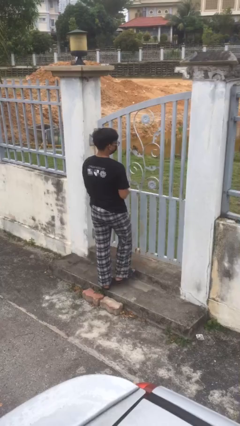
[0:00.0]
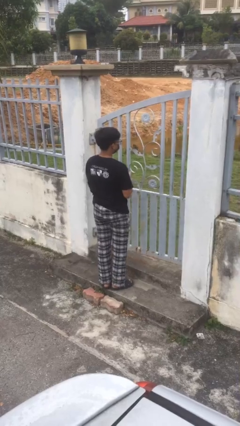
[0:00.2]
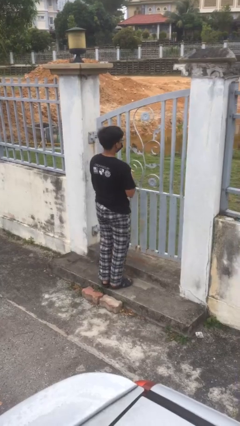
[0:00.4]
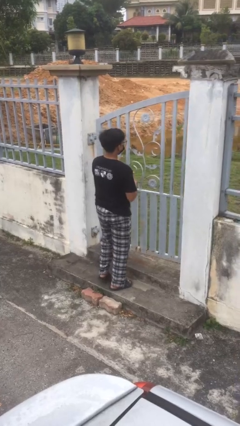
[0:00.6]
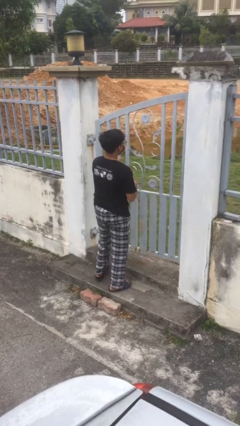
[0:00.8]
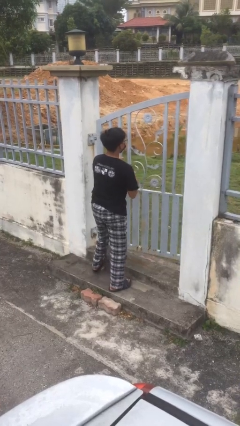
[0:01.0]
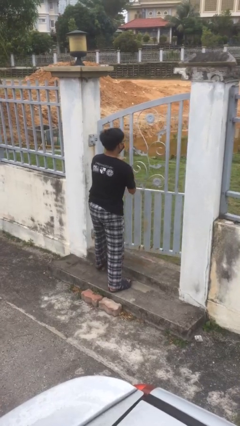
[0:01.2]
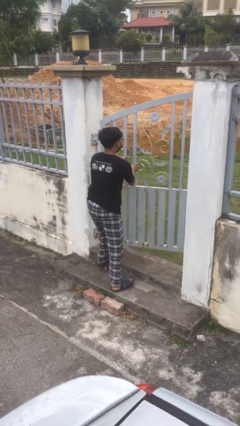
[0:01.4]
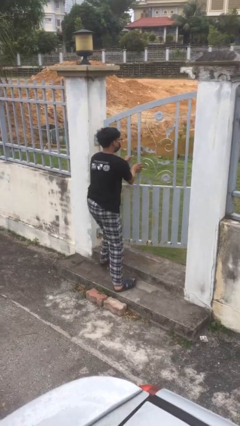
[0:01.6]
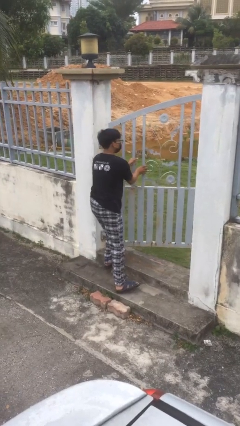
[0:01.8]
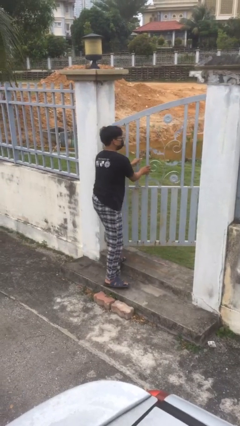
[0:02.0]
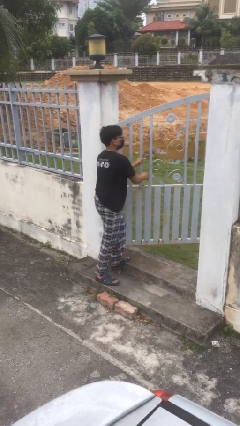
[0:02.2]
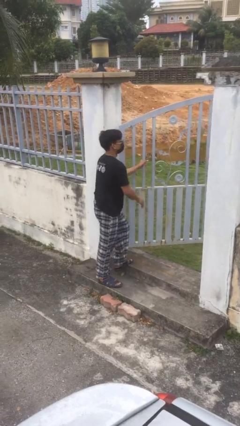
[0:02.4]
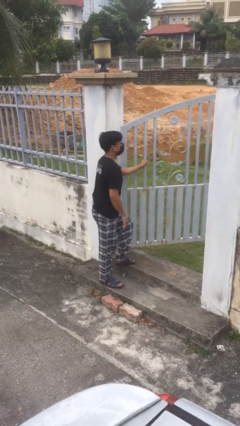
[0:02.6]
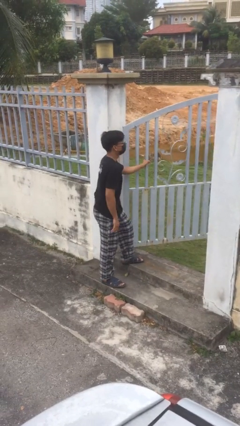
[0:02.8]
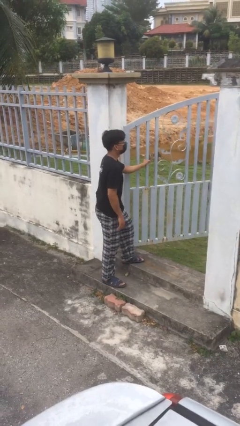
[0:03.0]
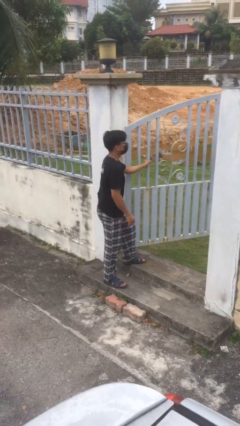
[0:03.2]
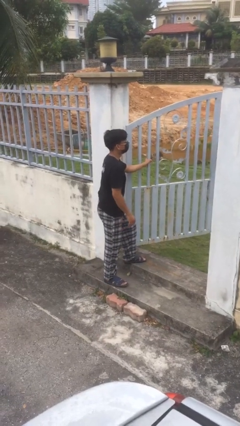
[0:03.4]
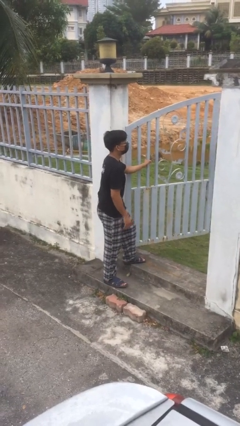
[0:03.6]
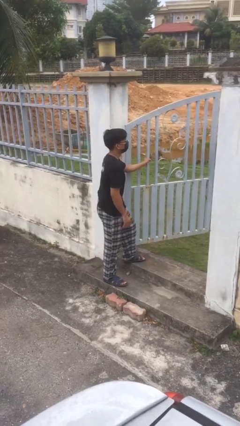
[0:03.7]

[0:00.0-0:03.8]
person opens facility door

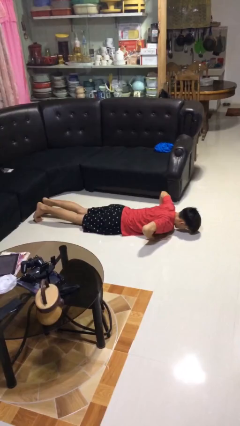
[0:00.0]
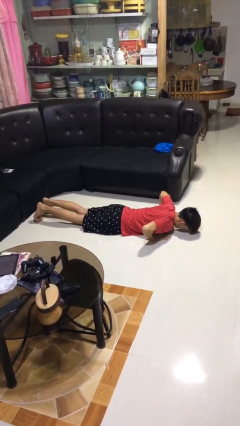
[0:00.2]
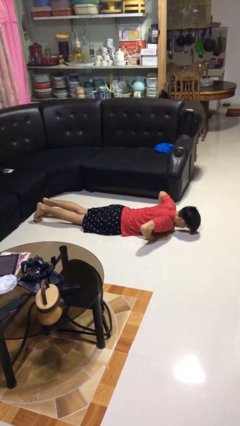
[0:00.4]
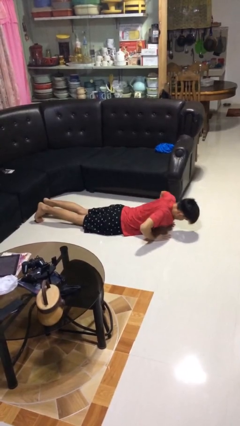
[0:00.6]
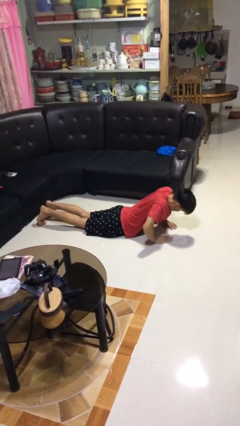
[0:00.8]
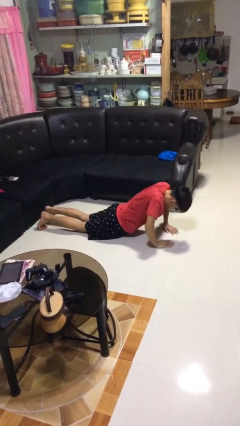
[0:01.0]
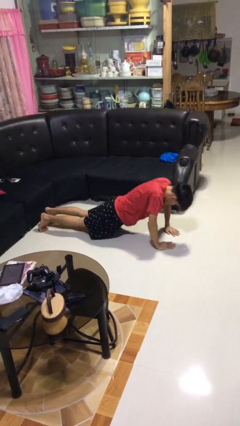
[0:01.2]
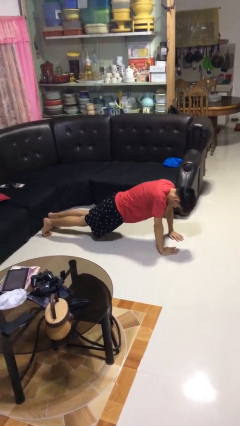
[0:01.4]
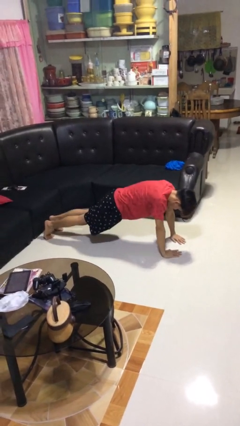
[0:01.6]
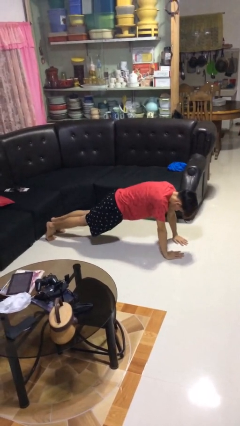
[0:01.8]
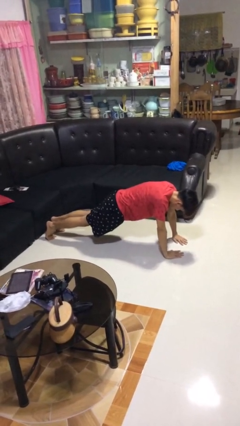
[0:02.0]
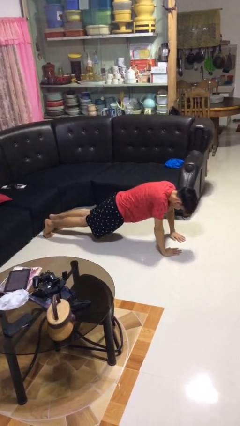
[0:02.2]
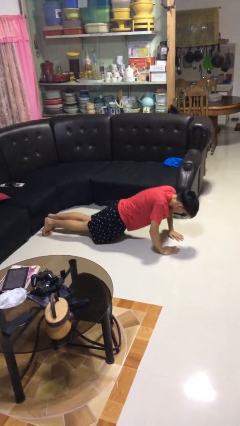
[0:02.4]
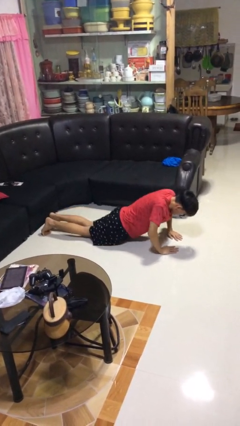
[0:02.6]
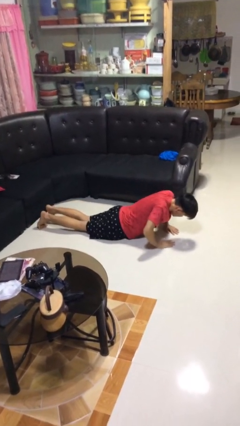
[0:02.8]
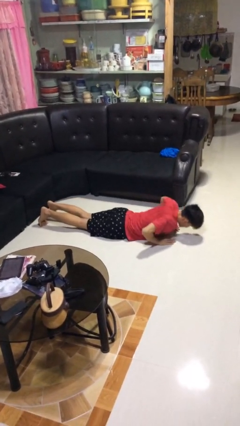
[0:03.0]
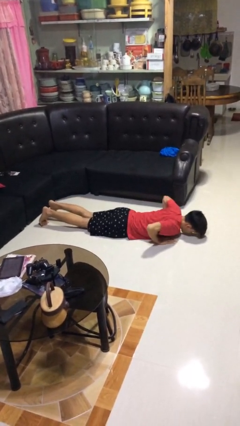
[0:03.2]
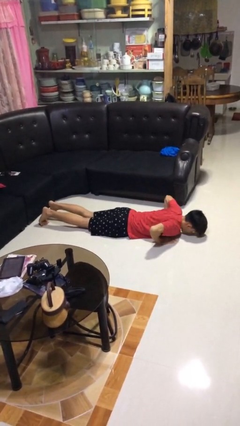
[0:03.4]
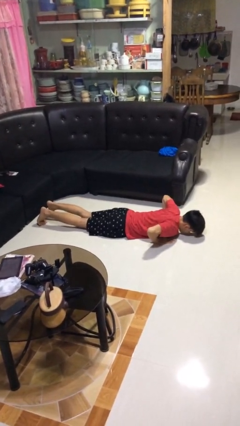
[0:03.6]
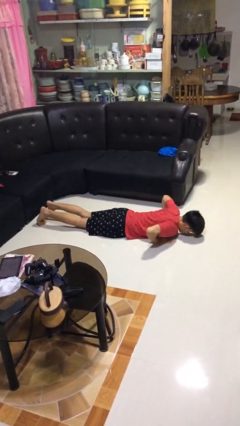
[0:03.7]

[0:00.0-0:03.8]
person exercises with pushup

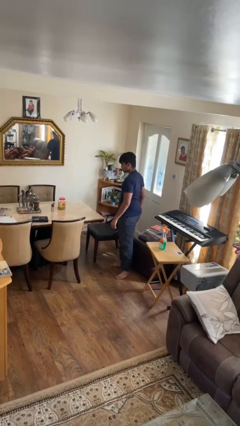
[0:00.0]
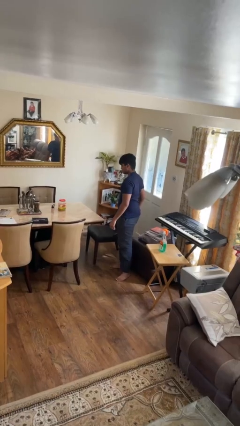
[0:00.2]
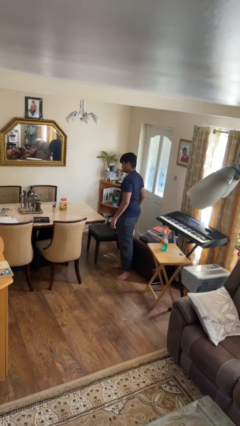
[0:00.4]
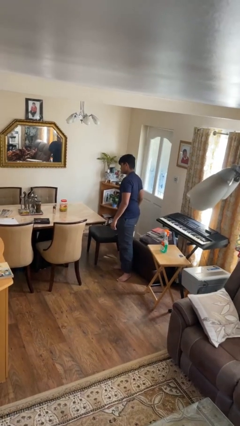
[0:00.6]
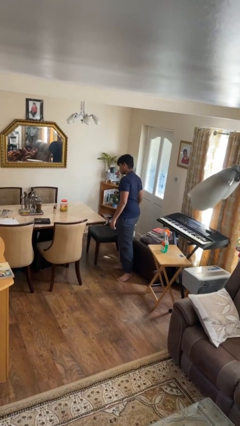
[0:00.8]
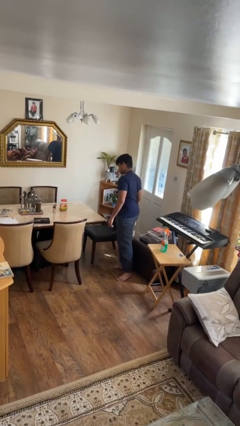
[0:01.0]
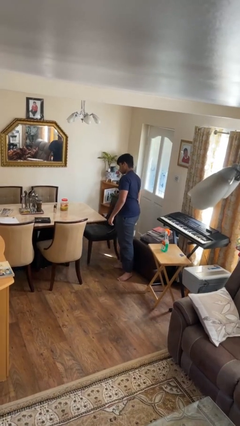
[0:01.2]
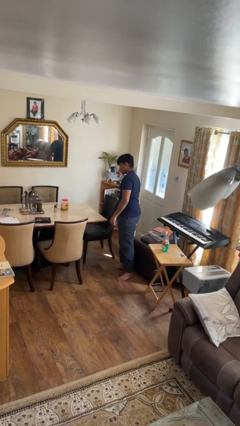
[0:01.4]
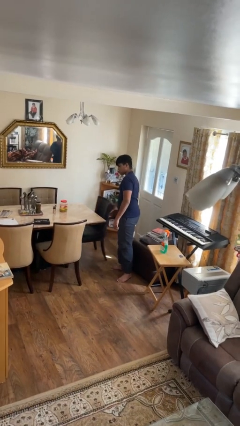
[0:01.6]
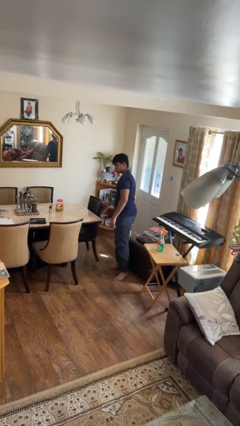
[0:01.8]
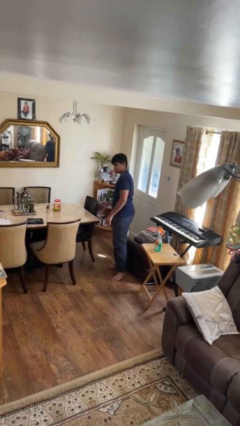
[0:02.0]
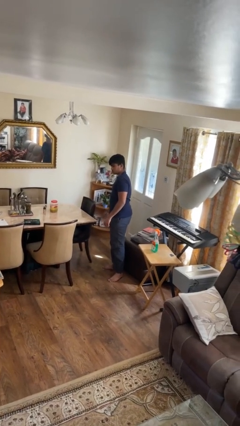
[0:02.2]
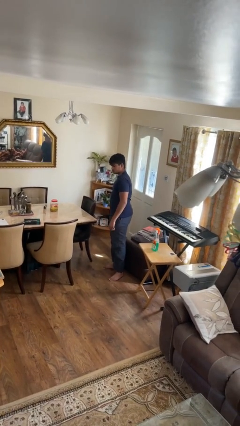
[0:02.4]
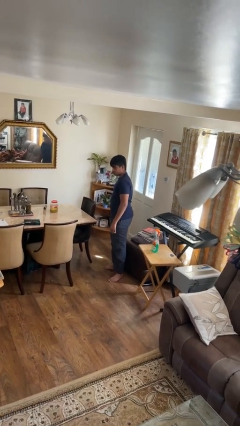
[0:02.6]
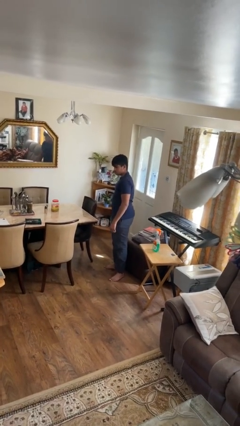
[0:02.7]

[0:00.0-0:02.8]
person pushes in chair

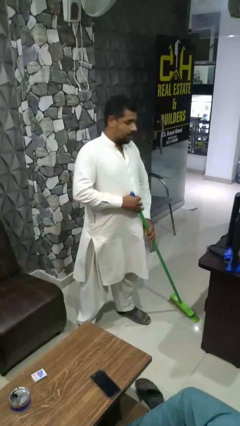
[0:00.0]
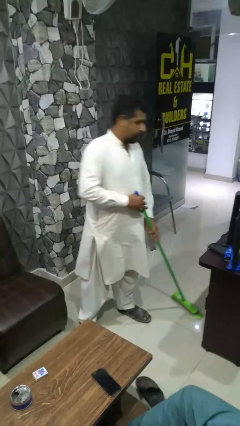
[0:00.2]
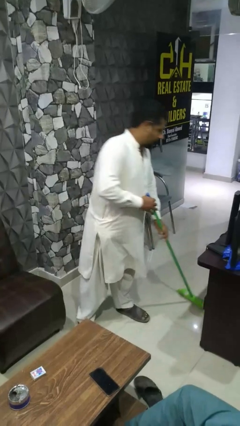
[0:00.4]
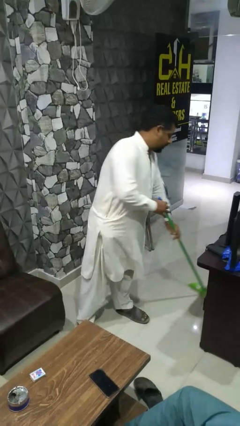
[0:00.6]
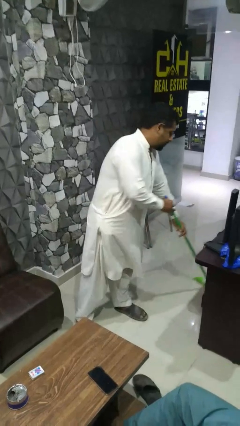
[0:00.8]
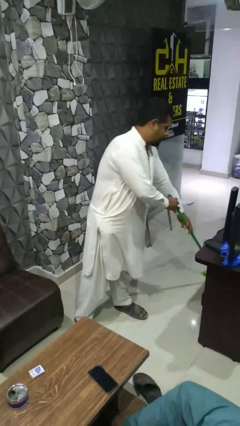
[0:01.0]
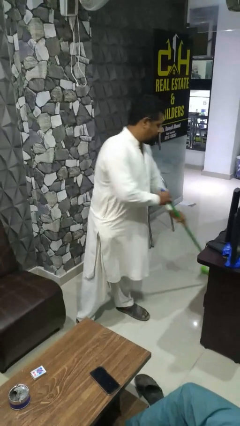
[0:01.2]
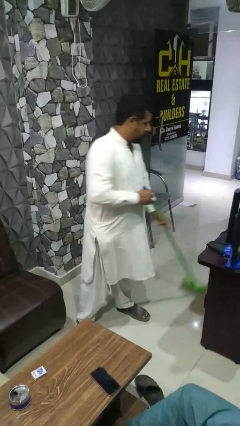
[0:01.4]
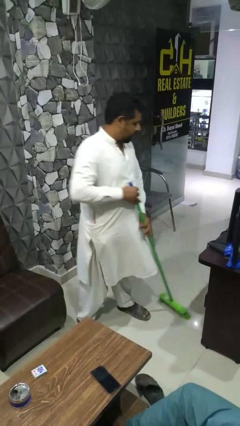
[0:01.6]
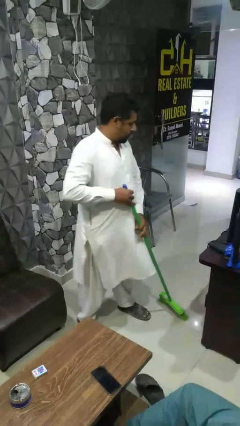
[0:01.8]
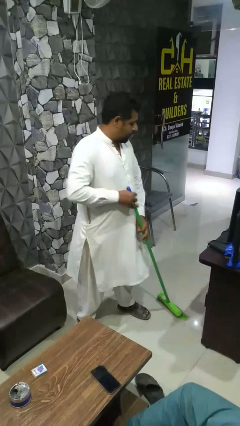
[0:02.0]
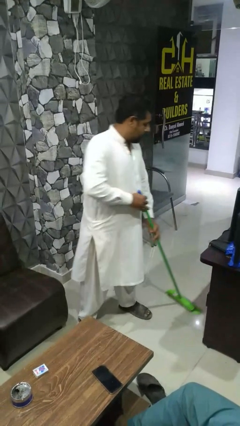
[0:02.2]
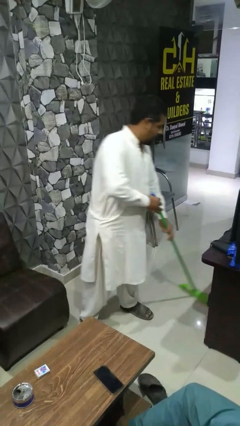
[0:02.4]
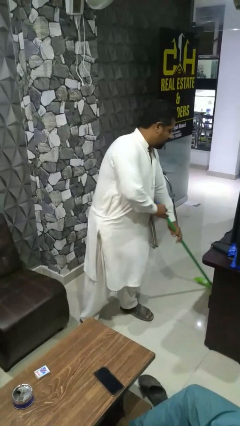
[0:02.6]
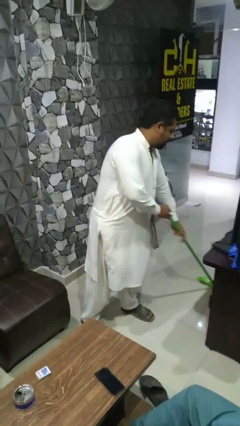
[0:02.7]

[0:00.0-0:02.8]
person mops

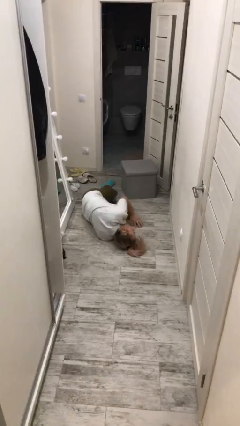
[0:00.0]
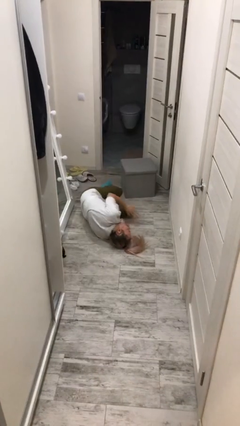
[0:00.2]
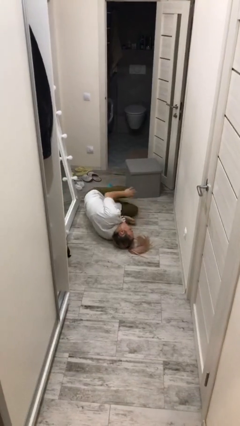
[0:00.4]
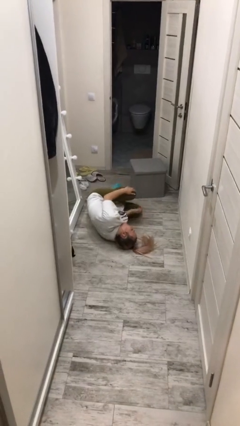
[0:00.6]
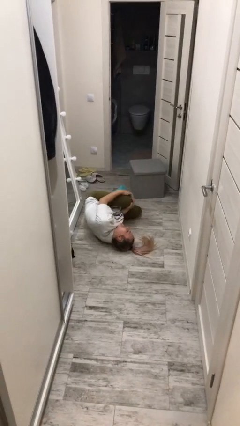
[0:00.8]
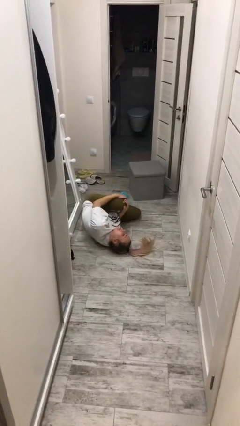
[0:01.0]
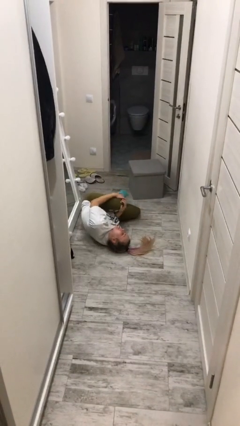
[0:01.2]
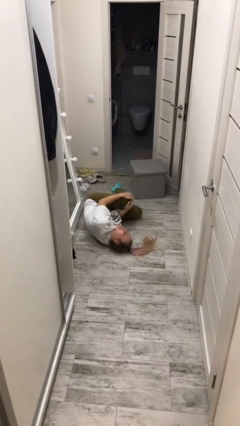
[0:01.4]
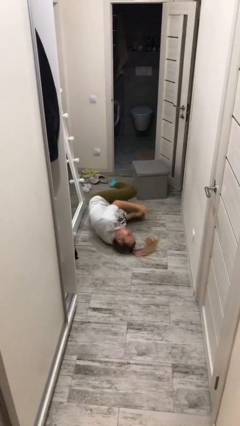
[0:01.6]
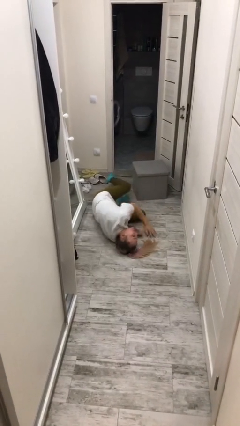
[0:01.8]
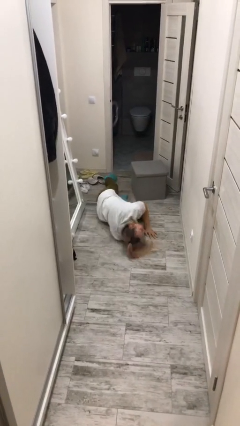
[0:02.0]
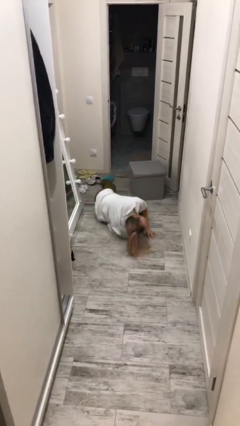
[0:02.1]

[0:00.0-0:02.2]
person lies down on floor

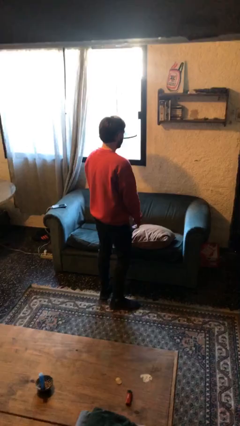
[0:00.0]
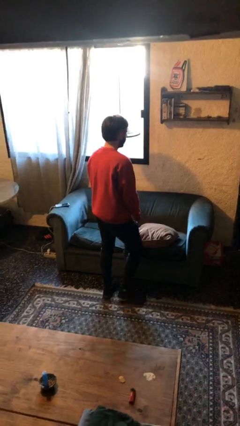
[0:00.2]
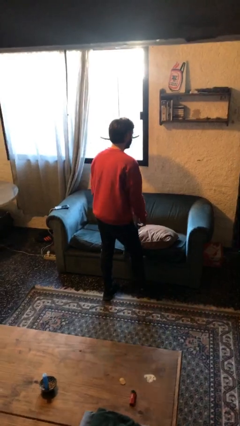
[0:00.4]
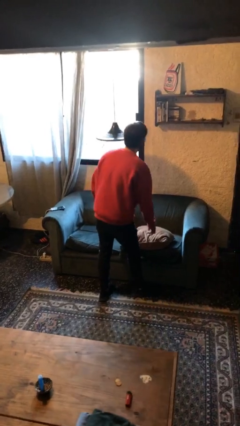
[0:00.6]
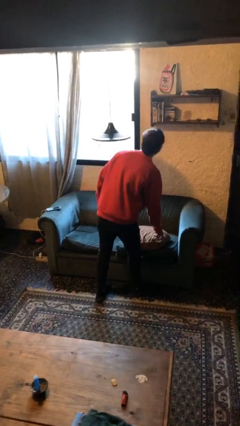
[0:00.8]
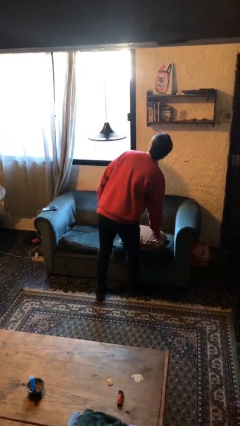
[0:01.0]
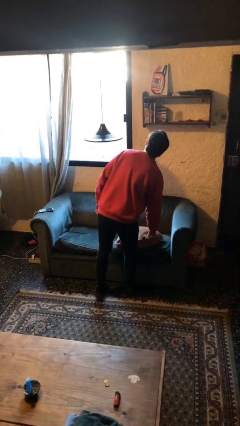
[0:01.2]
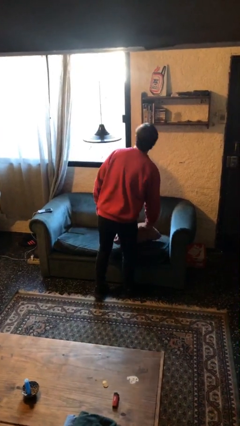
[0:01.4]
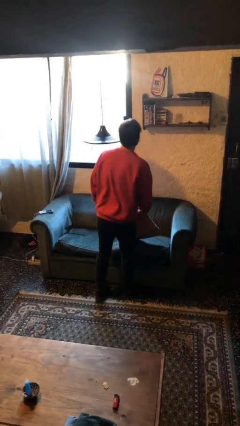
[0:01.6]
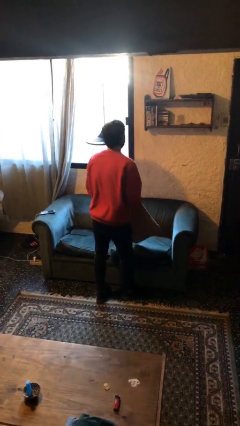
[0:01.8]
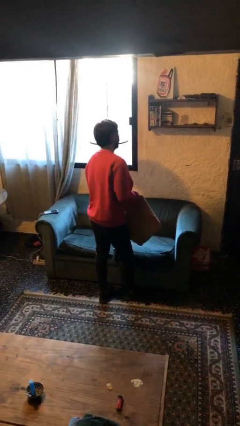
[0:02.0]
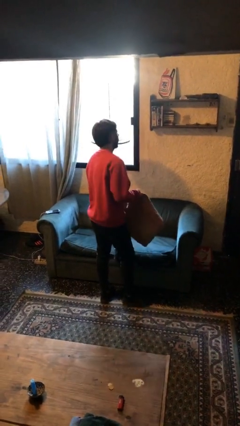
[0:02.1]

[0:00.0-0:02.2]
person picks up object from couch
